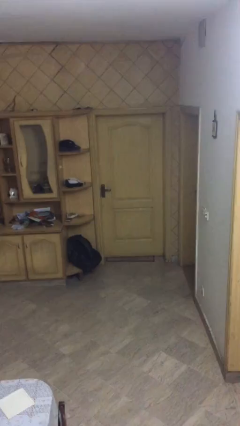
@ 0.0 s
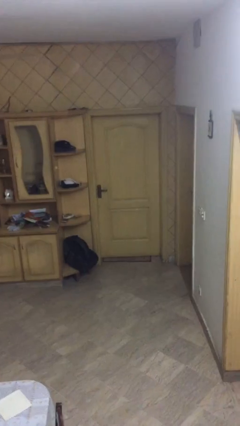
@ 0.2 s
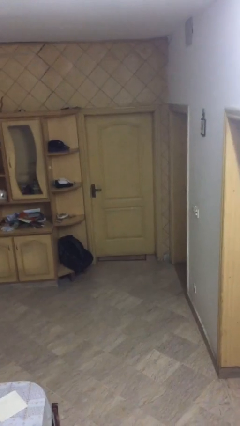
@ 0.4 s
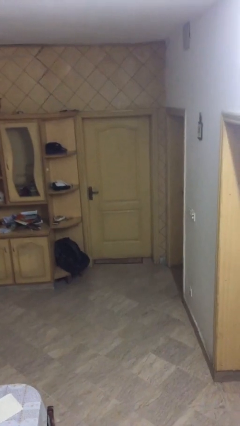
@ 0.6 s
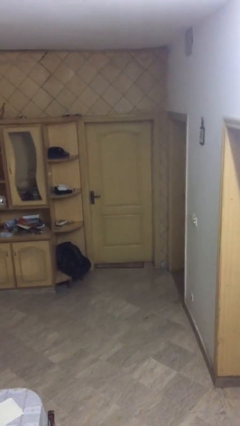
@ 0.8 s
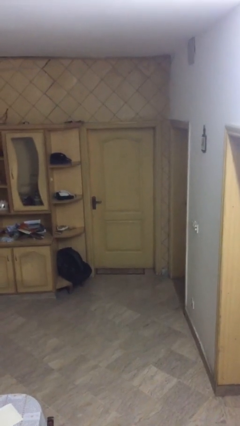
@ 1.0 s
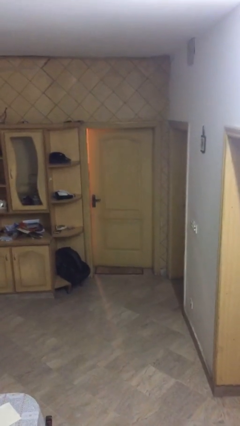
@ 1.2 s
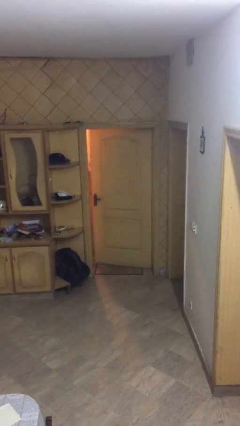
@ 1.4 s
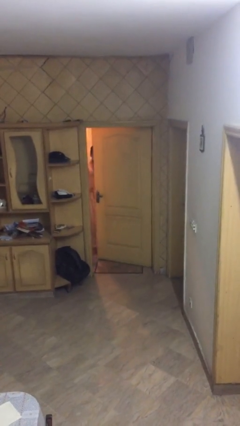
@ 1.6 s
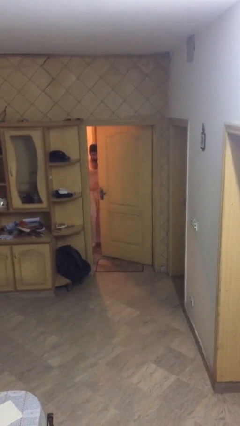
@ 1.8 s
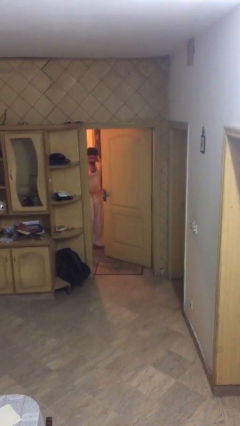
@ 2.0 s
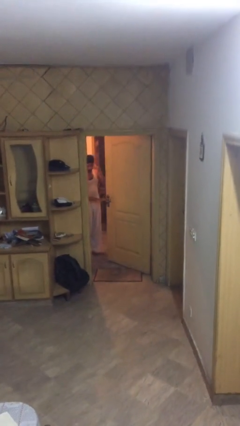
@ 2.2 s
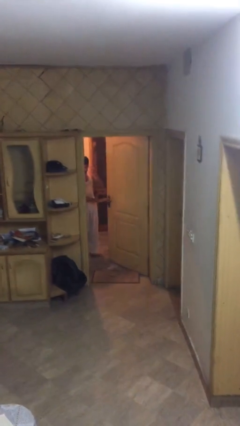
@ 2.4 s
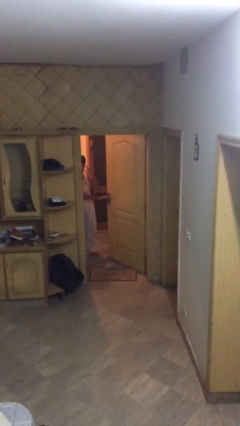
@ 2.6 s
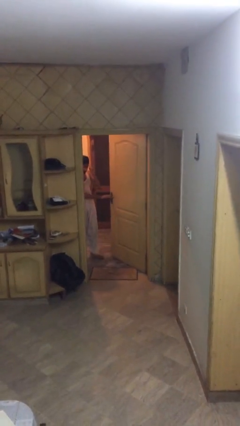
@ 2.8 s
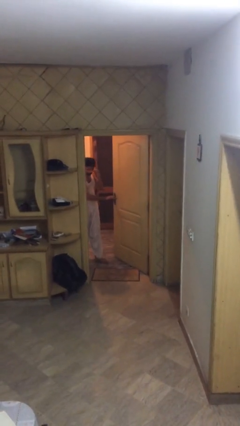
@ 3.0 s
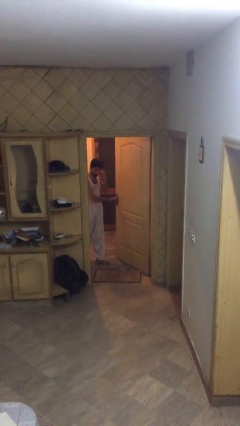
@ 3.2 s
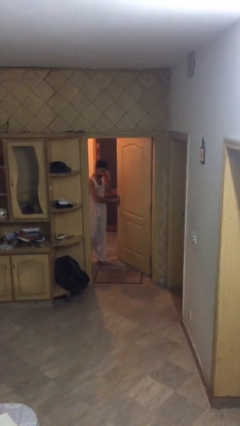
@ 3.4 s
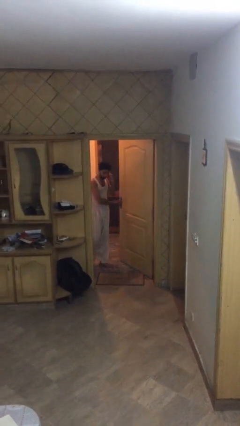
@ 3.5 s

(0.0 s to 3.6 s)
person opens facility door

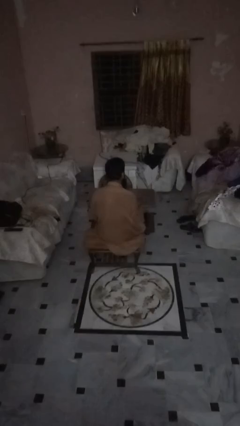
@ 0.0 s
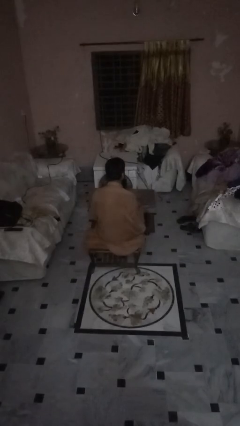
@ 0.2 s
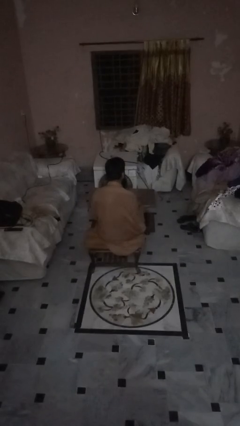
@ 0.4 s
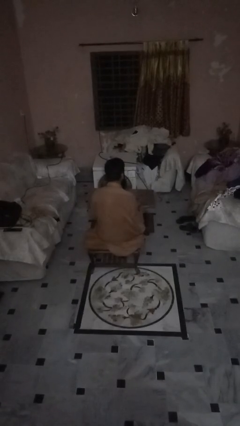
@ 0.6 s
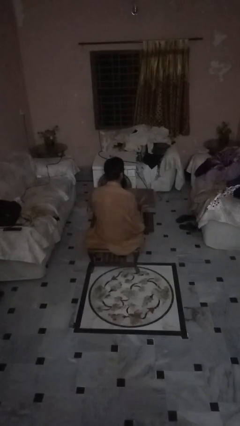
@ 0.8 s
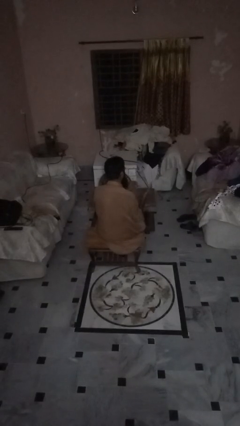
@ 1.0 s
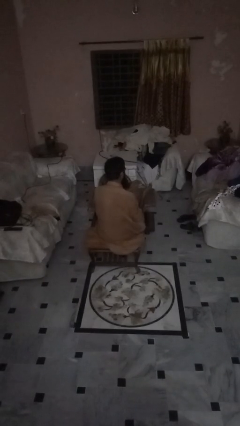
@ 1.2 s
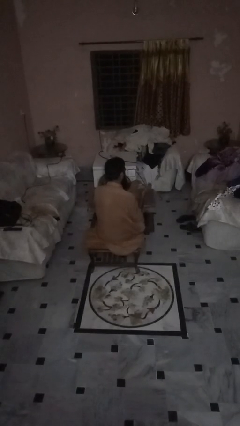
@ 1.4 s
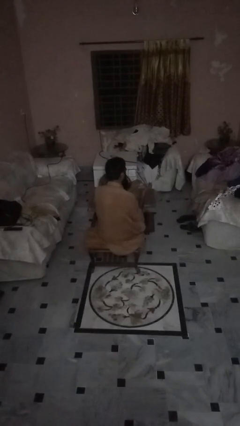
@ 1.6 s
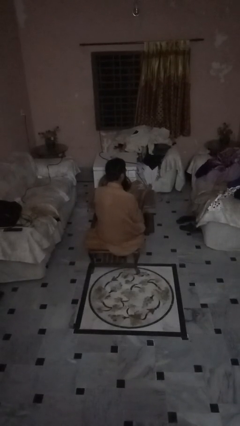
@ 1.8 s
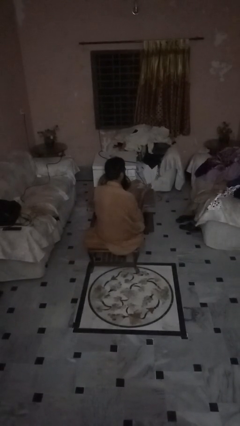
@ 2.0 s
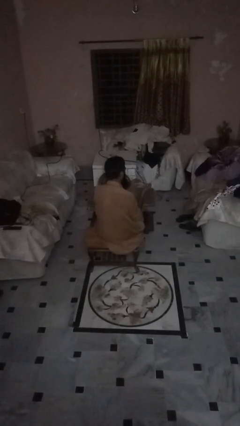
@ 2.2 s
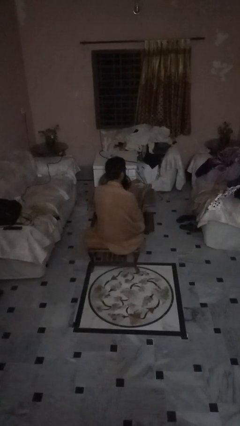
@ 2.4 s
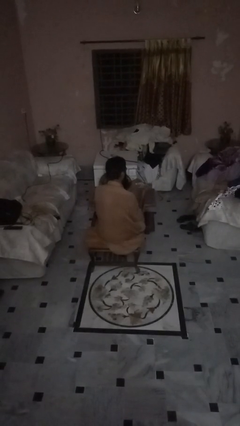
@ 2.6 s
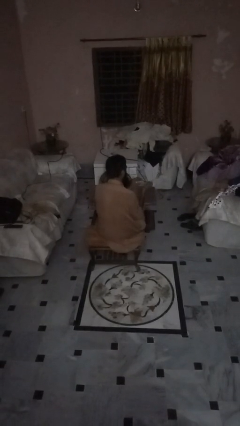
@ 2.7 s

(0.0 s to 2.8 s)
person clips fingernails

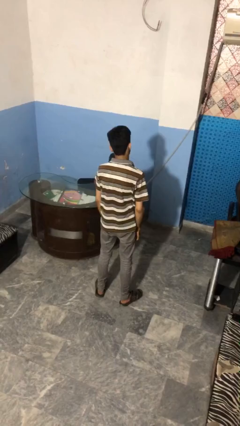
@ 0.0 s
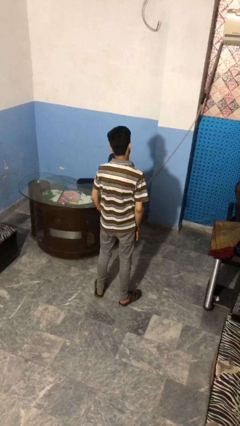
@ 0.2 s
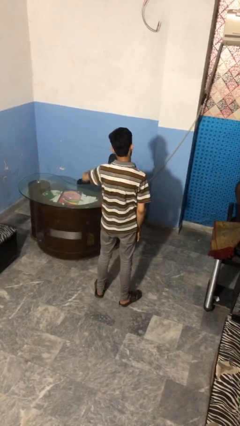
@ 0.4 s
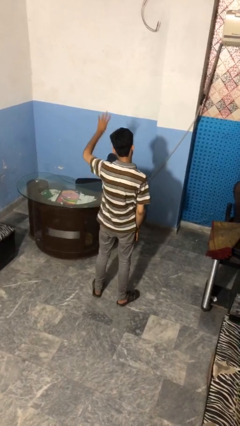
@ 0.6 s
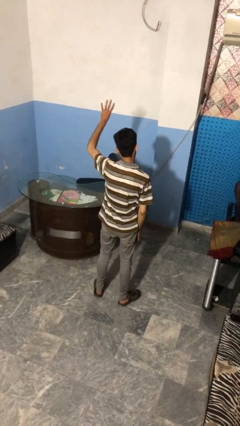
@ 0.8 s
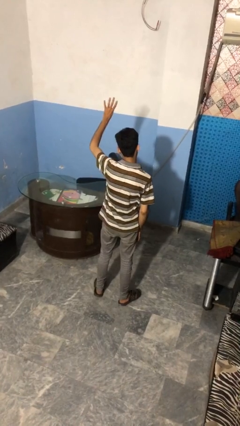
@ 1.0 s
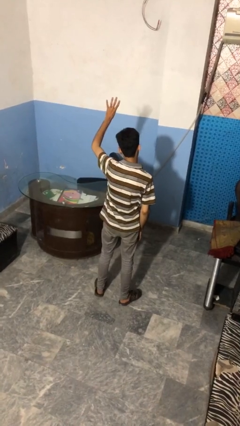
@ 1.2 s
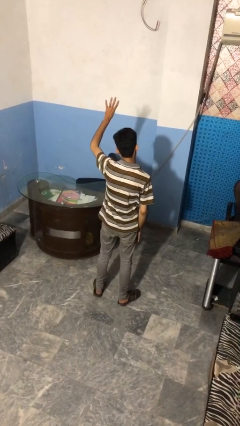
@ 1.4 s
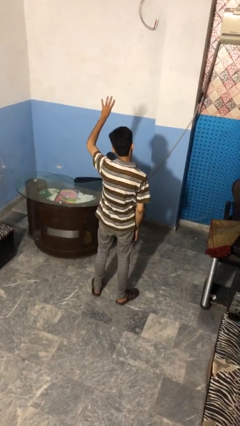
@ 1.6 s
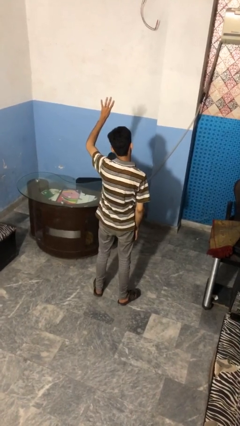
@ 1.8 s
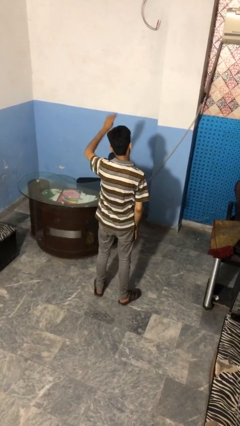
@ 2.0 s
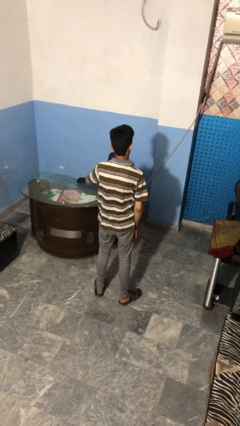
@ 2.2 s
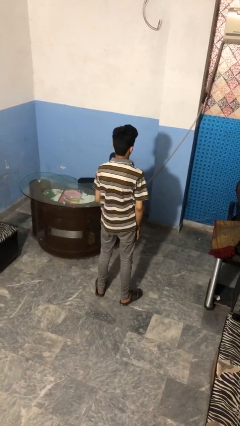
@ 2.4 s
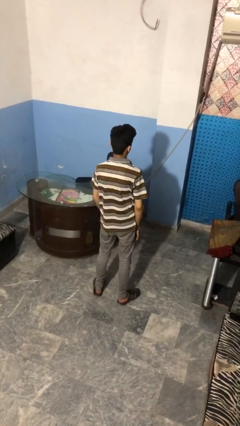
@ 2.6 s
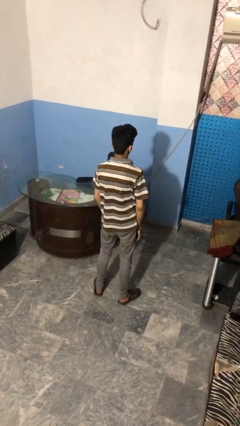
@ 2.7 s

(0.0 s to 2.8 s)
person gestures number four

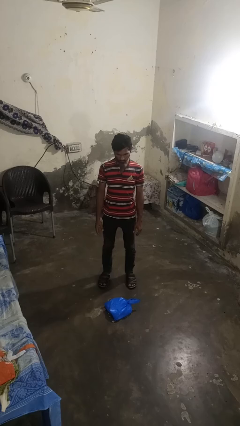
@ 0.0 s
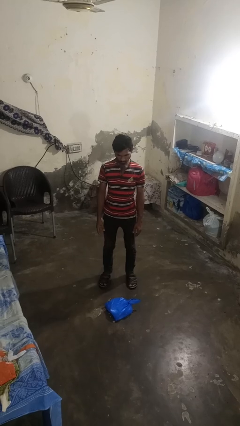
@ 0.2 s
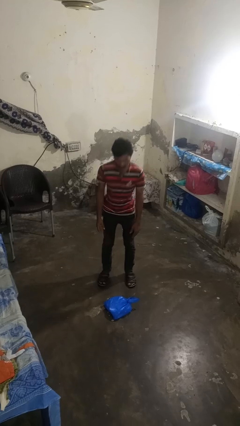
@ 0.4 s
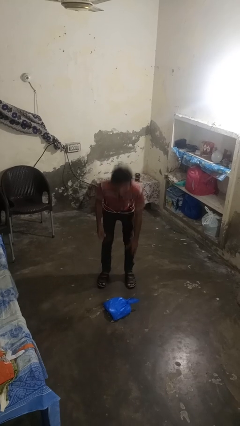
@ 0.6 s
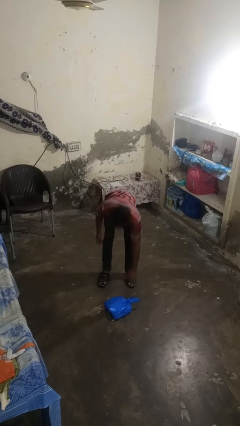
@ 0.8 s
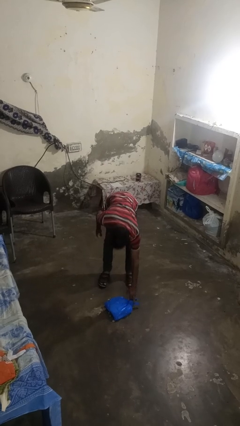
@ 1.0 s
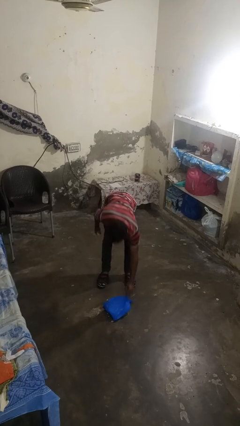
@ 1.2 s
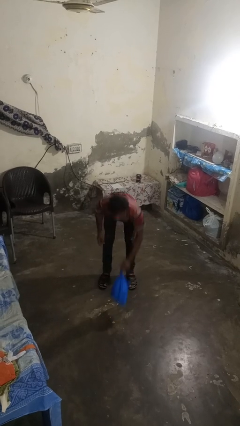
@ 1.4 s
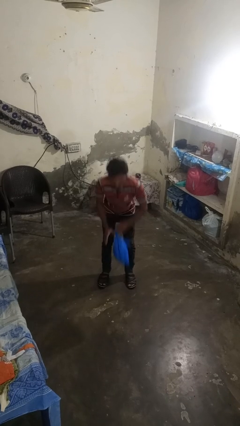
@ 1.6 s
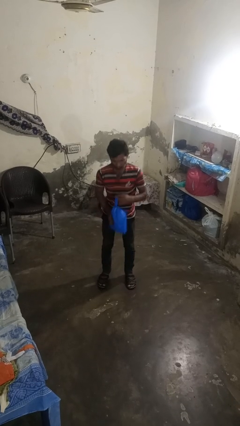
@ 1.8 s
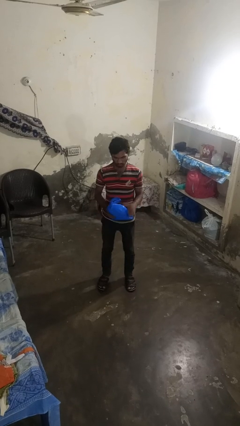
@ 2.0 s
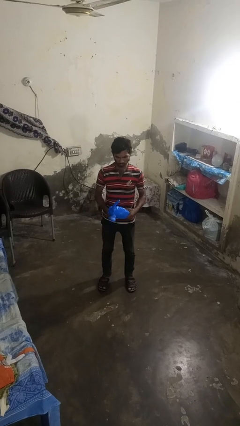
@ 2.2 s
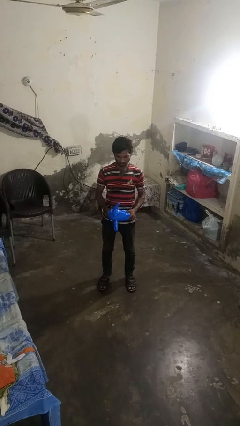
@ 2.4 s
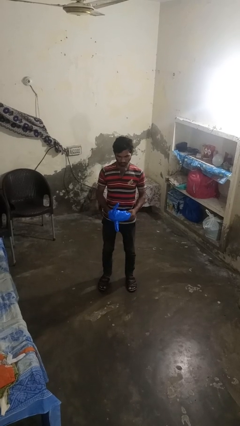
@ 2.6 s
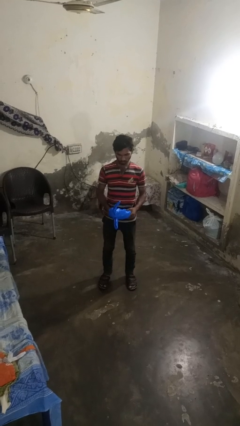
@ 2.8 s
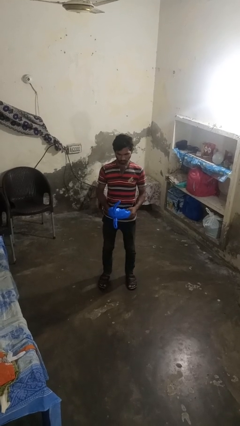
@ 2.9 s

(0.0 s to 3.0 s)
person picks up object from floor

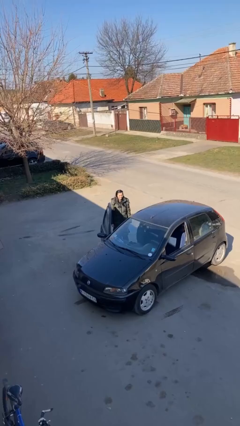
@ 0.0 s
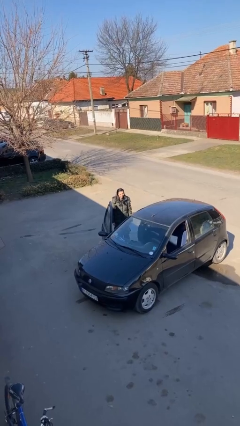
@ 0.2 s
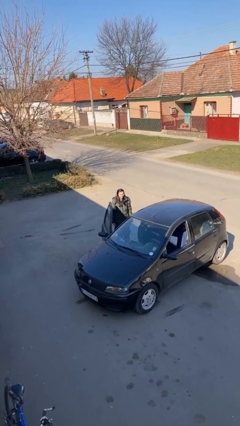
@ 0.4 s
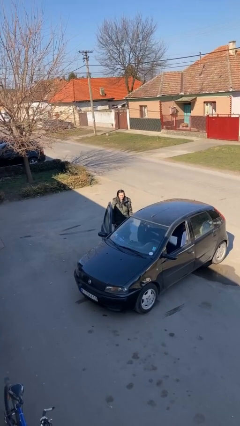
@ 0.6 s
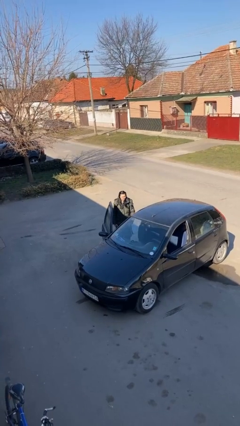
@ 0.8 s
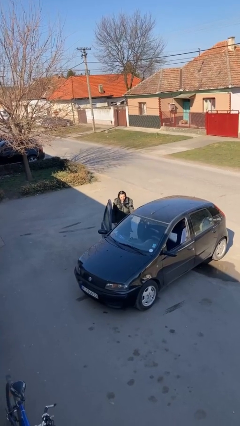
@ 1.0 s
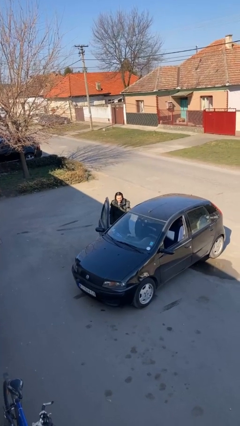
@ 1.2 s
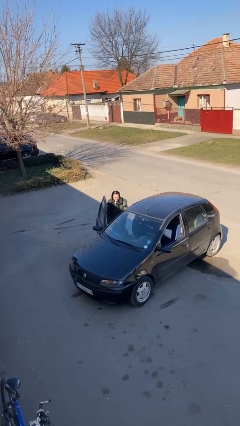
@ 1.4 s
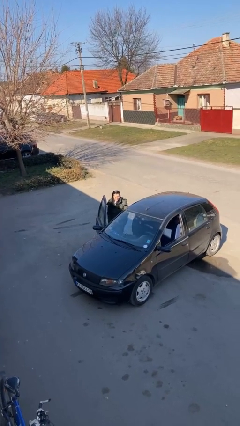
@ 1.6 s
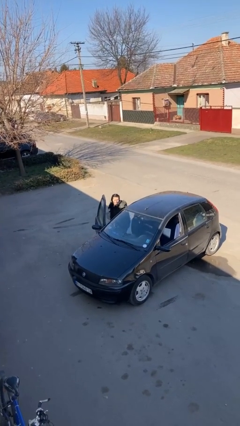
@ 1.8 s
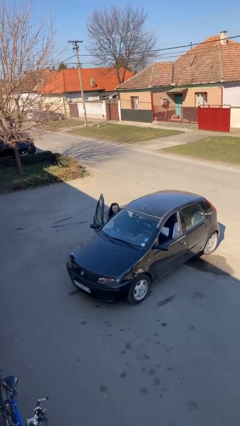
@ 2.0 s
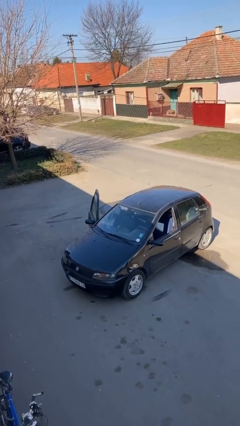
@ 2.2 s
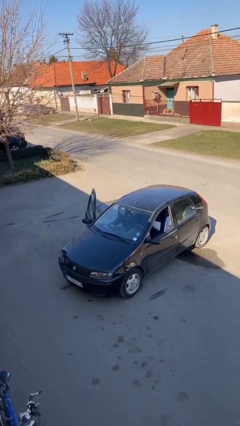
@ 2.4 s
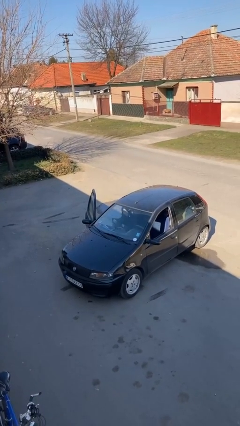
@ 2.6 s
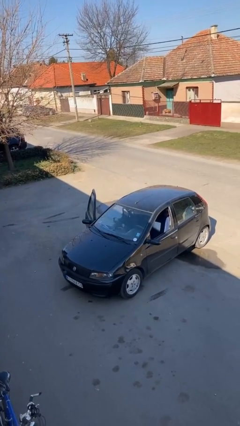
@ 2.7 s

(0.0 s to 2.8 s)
person enters car

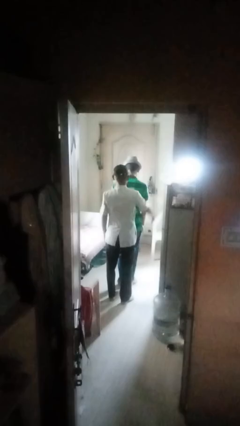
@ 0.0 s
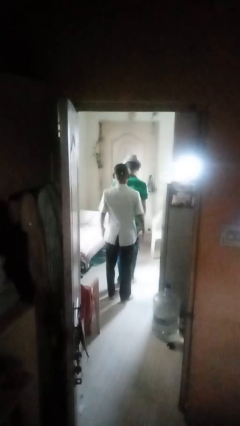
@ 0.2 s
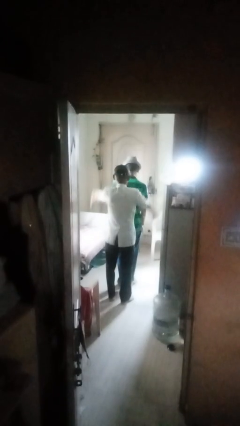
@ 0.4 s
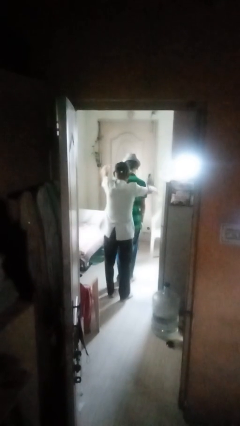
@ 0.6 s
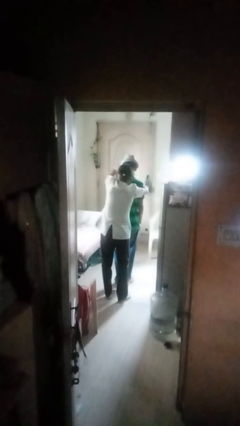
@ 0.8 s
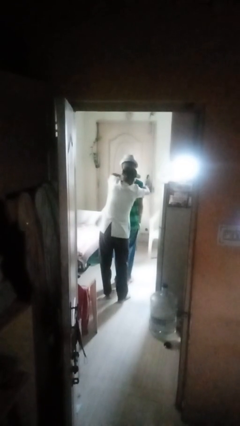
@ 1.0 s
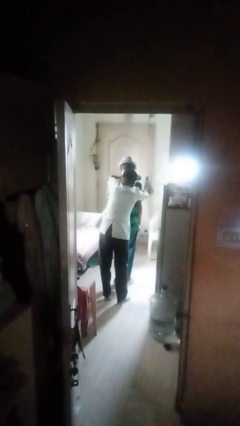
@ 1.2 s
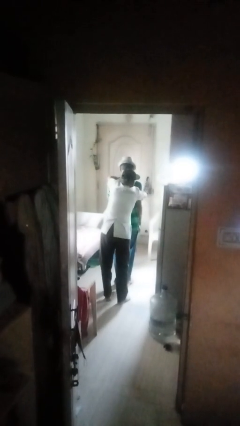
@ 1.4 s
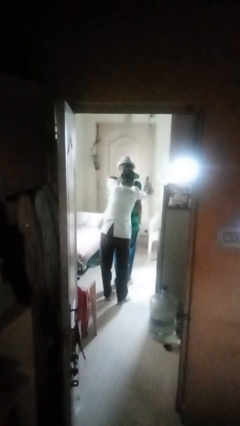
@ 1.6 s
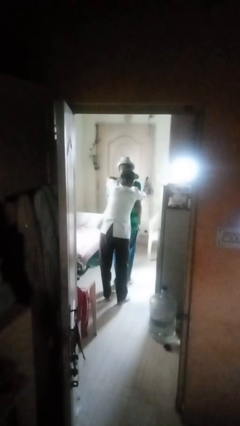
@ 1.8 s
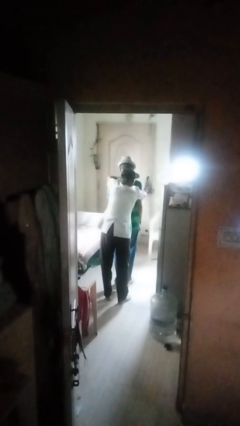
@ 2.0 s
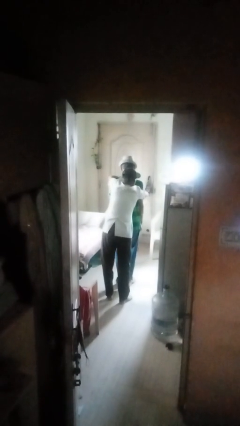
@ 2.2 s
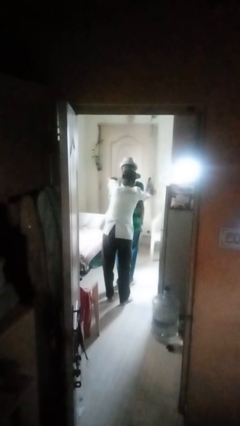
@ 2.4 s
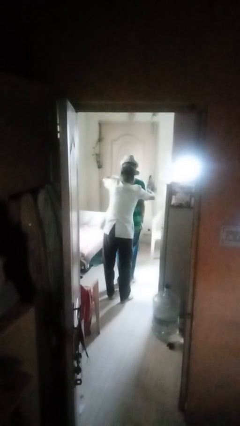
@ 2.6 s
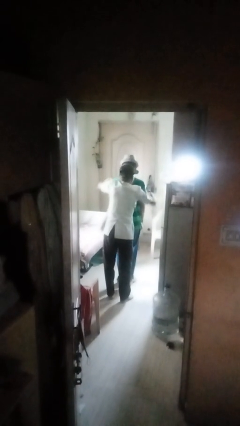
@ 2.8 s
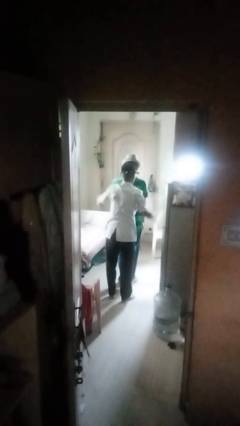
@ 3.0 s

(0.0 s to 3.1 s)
person hugs person from behind
